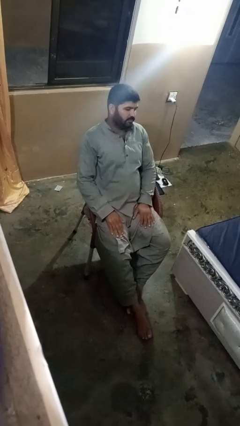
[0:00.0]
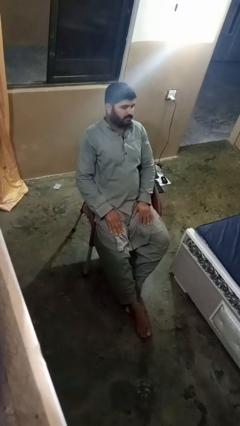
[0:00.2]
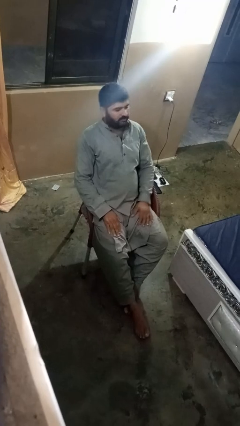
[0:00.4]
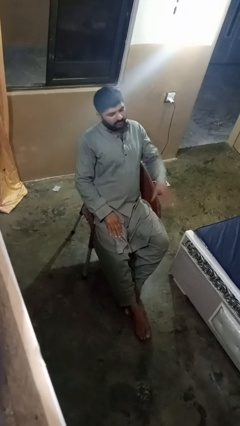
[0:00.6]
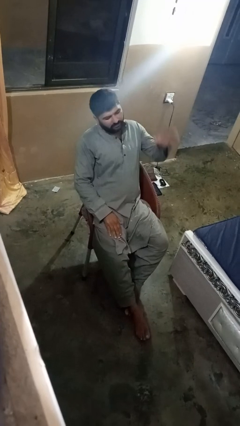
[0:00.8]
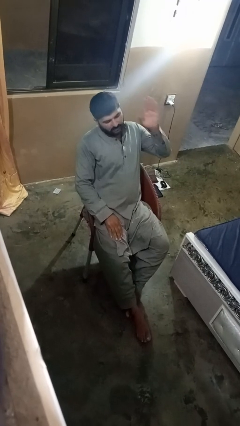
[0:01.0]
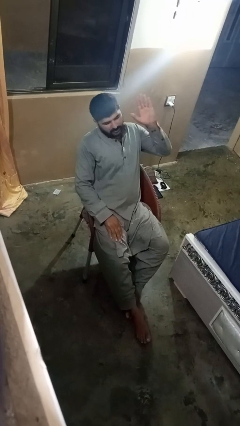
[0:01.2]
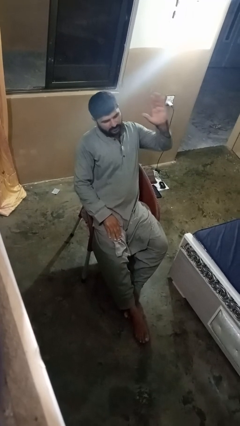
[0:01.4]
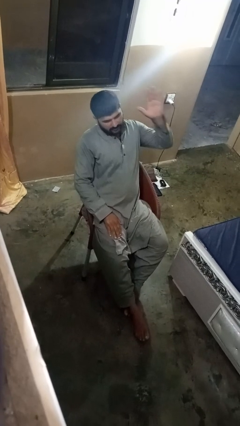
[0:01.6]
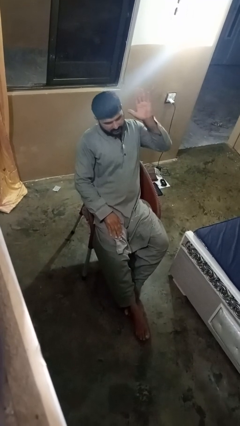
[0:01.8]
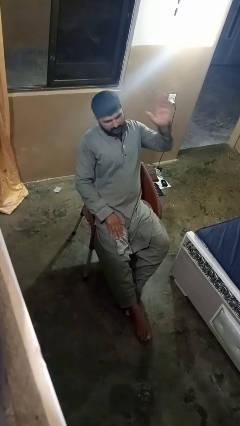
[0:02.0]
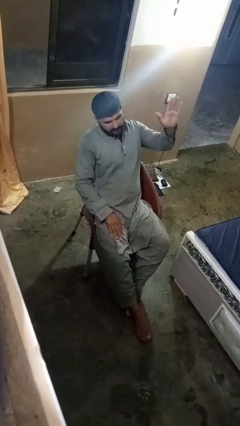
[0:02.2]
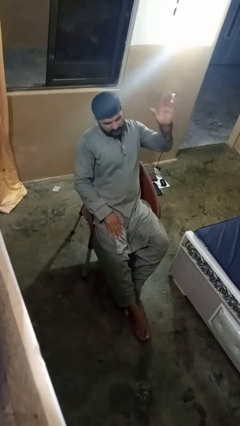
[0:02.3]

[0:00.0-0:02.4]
person gestures number five

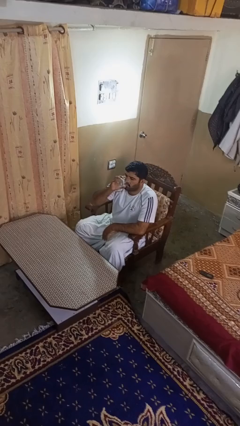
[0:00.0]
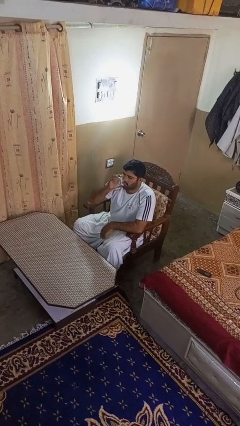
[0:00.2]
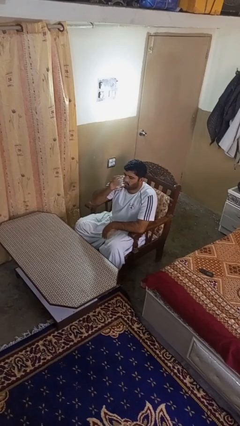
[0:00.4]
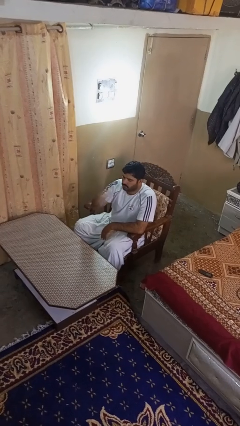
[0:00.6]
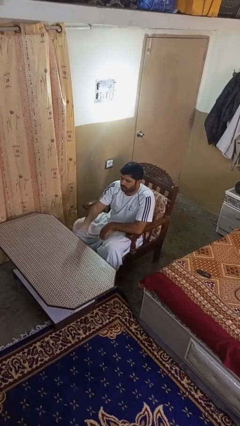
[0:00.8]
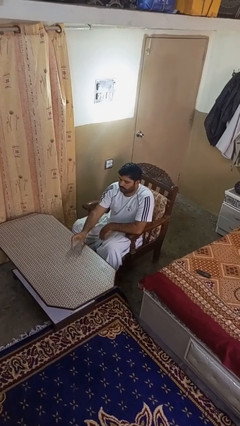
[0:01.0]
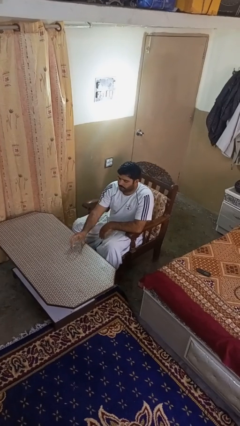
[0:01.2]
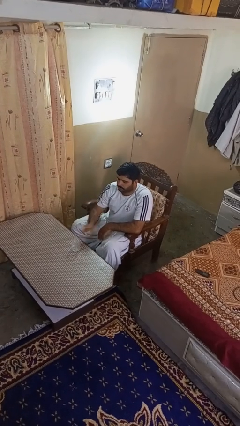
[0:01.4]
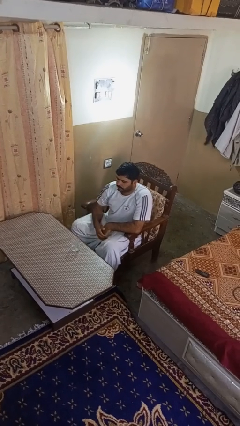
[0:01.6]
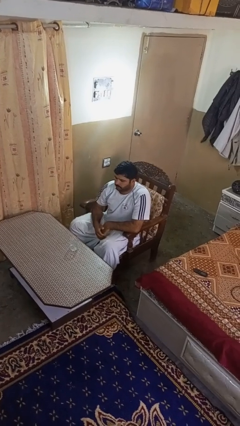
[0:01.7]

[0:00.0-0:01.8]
person puts down object on table

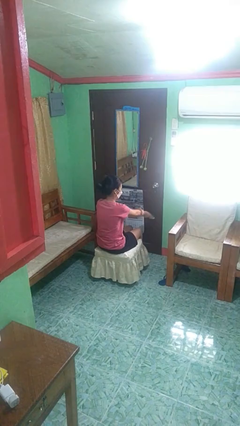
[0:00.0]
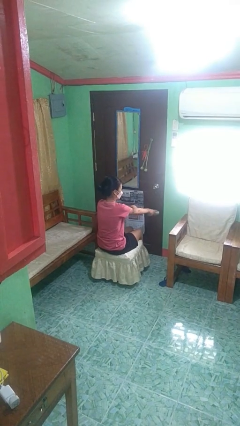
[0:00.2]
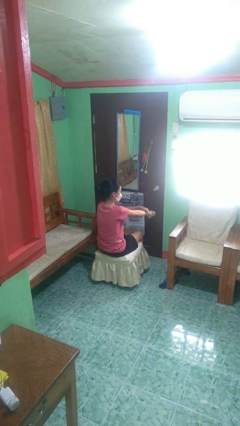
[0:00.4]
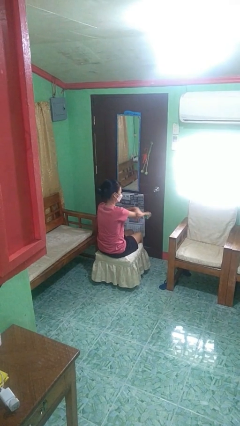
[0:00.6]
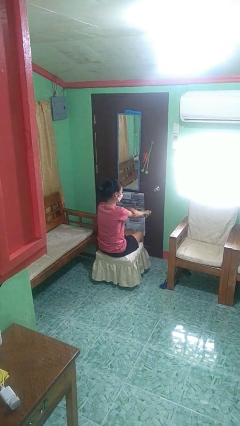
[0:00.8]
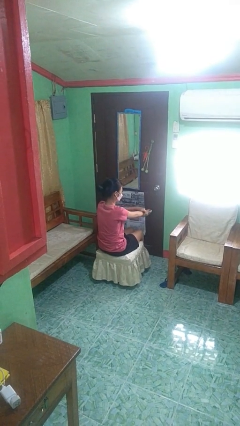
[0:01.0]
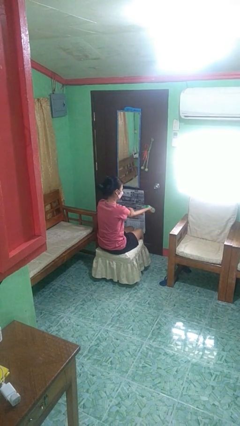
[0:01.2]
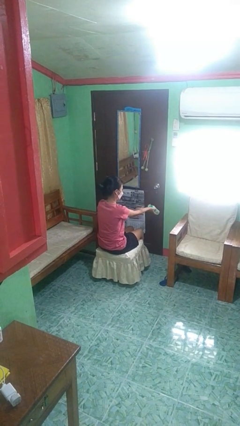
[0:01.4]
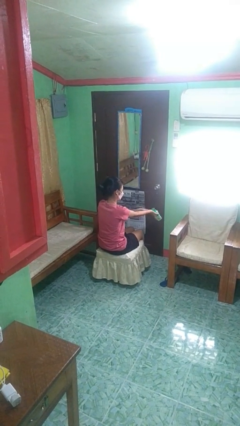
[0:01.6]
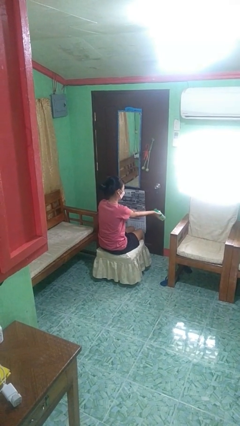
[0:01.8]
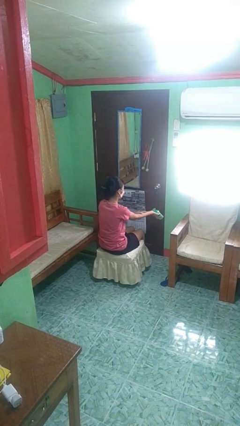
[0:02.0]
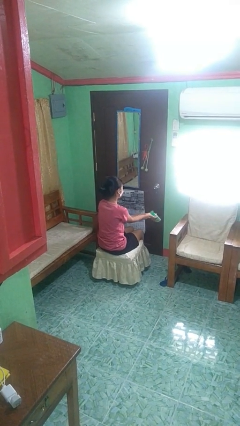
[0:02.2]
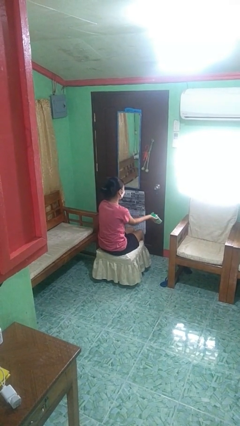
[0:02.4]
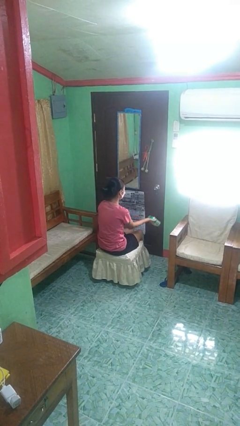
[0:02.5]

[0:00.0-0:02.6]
person applies sunscreen

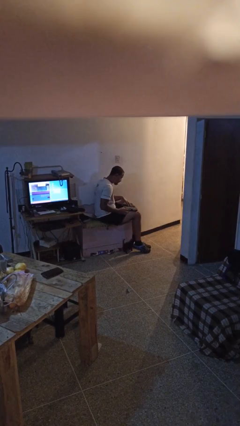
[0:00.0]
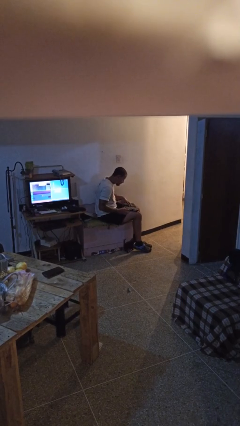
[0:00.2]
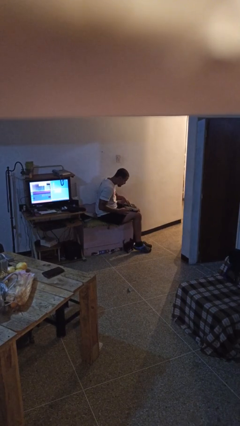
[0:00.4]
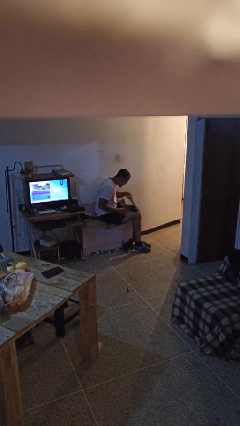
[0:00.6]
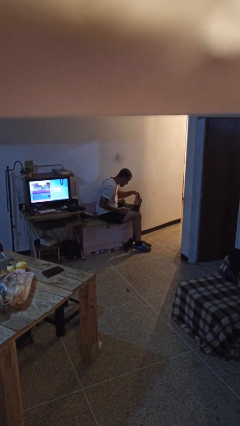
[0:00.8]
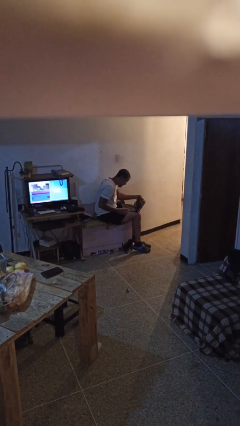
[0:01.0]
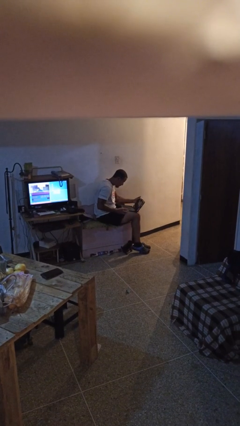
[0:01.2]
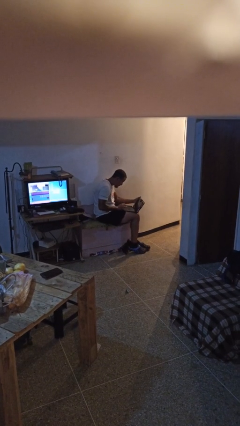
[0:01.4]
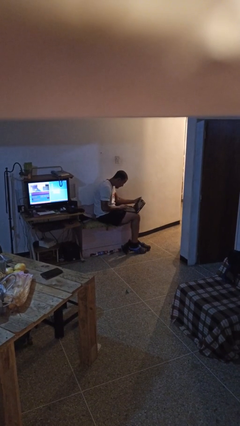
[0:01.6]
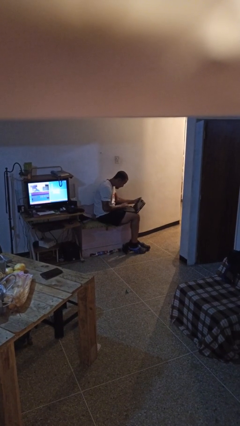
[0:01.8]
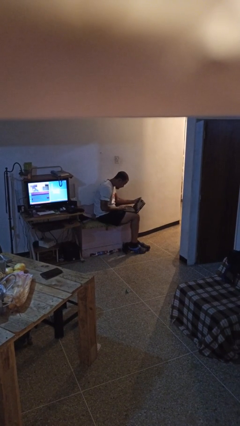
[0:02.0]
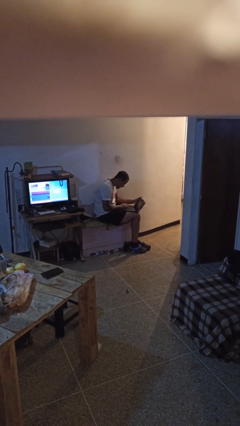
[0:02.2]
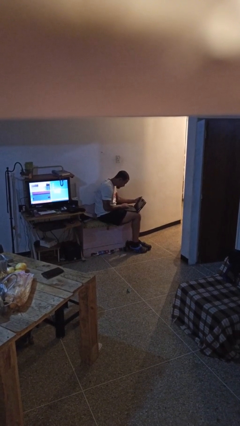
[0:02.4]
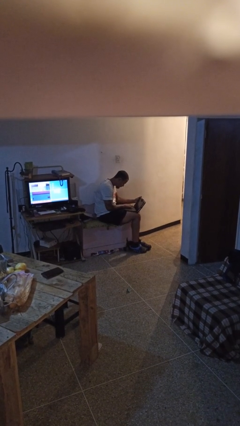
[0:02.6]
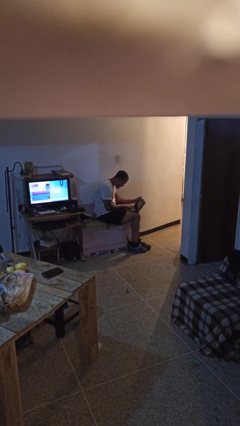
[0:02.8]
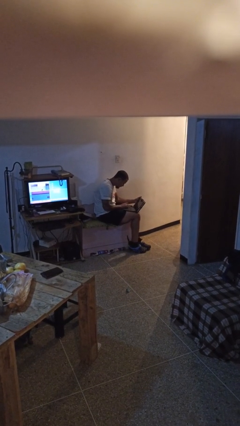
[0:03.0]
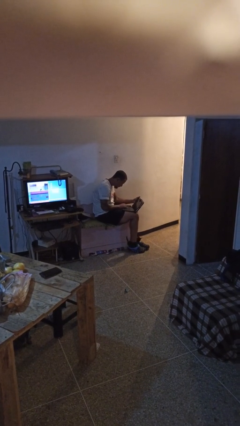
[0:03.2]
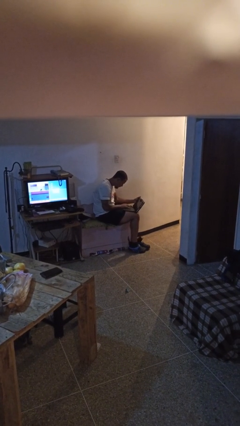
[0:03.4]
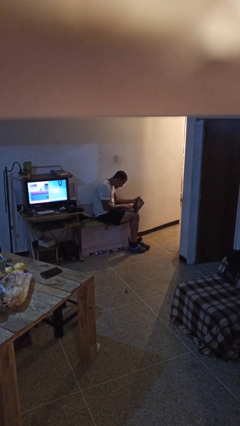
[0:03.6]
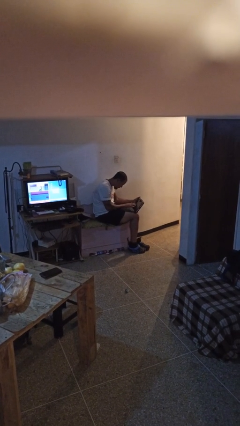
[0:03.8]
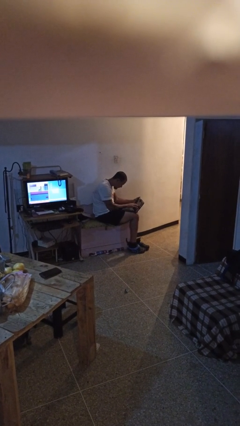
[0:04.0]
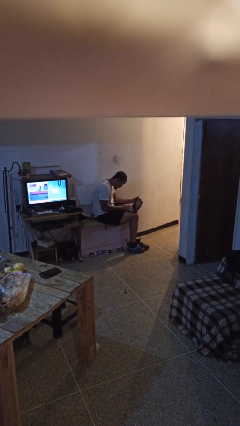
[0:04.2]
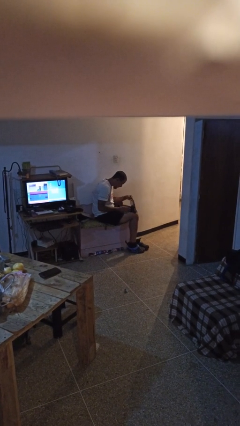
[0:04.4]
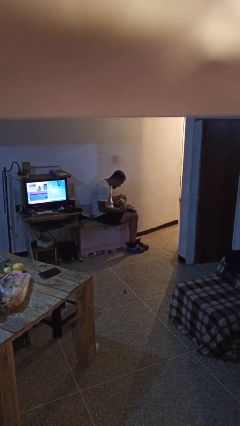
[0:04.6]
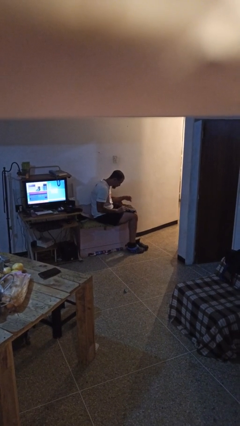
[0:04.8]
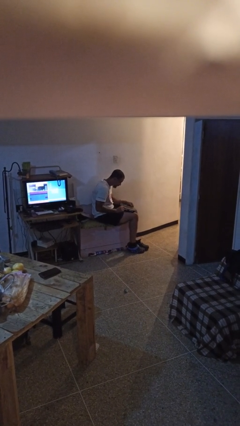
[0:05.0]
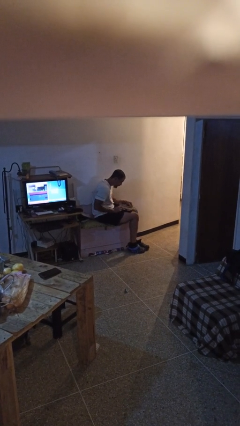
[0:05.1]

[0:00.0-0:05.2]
person interacts with laptop

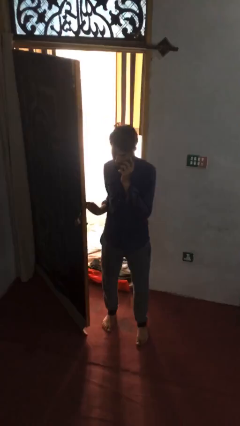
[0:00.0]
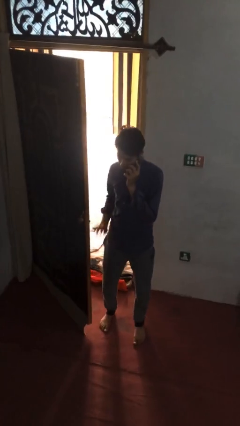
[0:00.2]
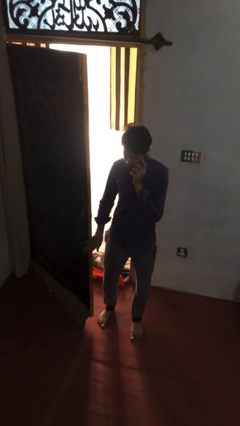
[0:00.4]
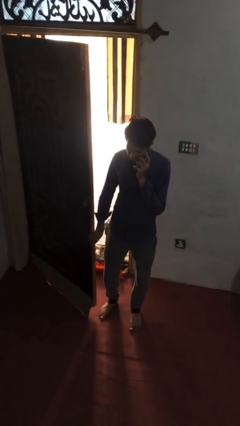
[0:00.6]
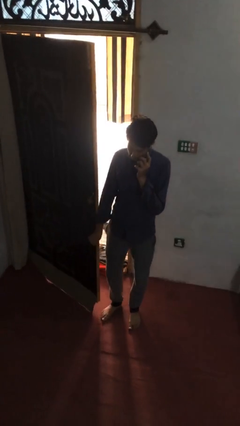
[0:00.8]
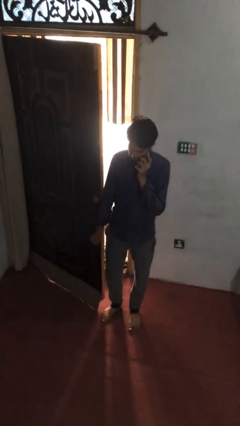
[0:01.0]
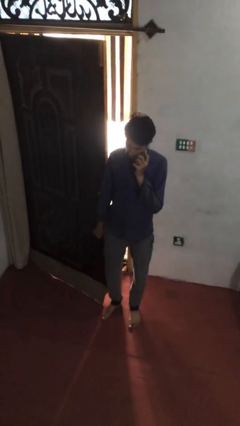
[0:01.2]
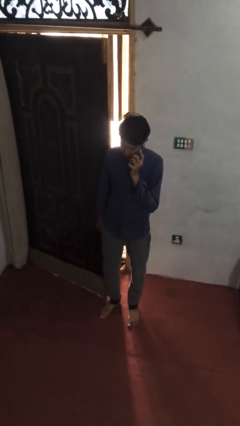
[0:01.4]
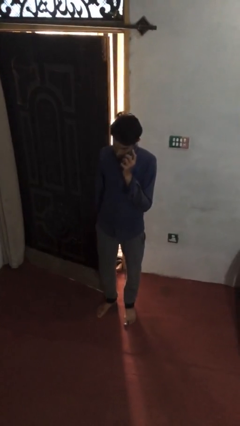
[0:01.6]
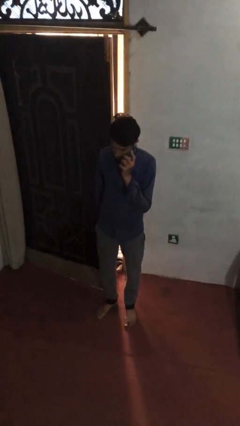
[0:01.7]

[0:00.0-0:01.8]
person closes facility door

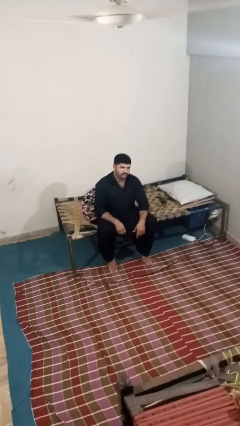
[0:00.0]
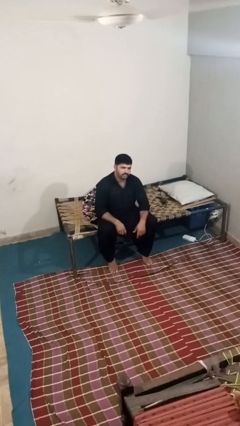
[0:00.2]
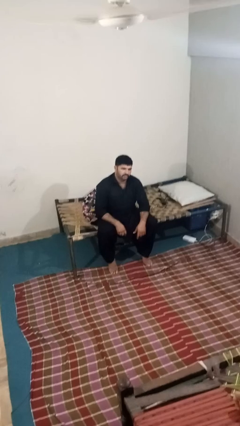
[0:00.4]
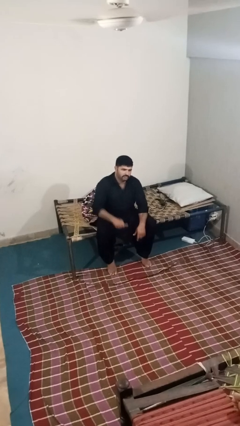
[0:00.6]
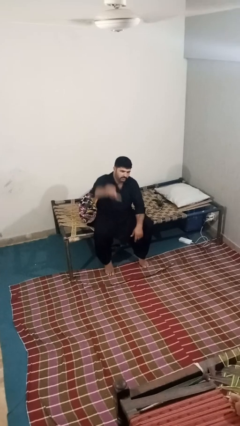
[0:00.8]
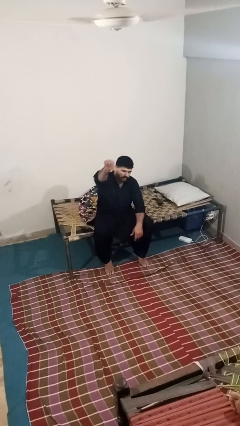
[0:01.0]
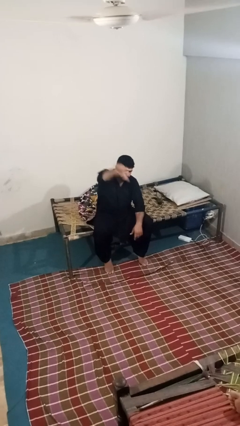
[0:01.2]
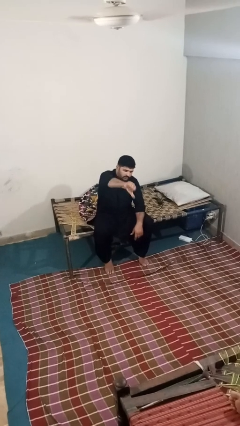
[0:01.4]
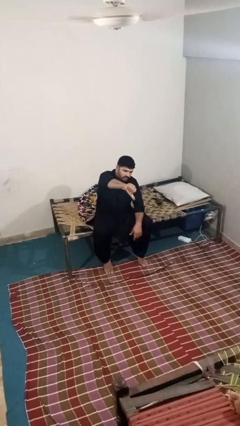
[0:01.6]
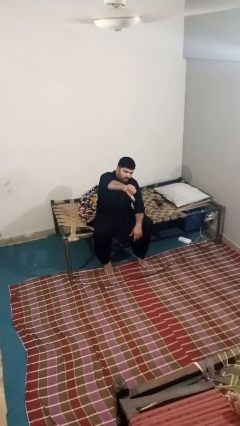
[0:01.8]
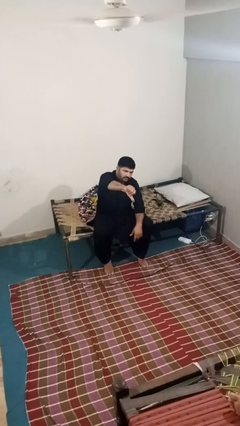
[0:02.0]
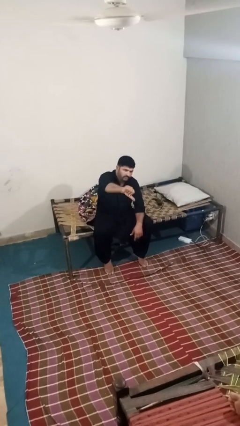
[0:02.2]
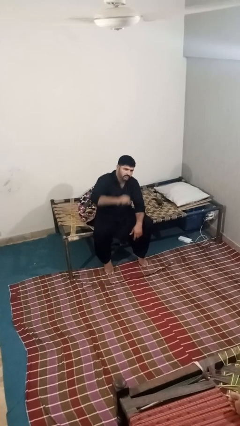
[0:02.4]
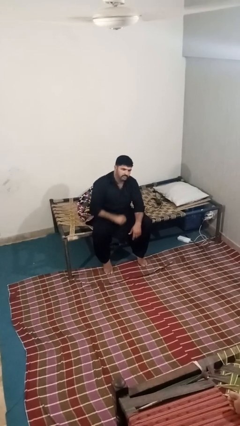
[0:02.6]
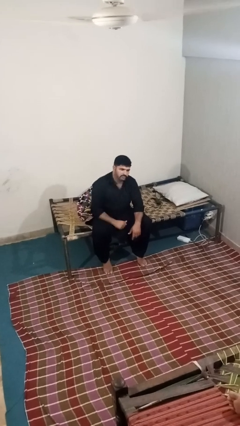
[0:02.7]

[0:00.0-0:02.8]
person gestures thumbs down

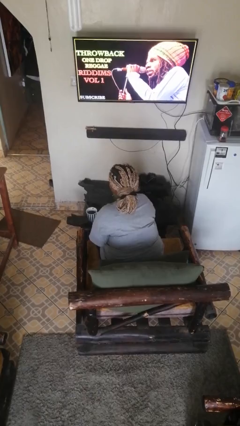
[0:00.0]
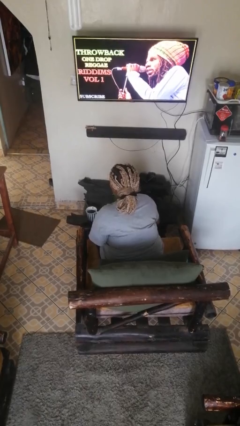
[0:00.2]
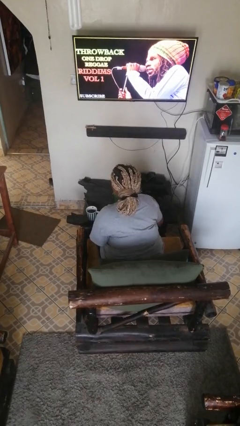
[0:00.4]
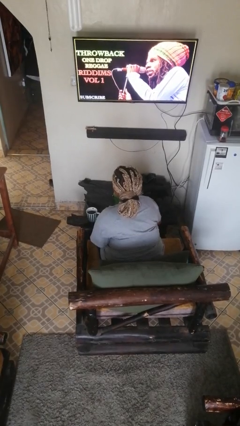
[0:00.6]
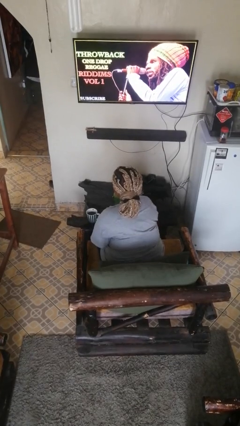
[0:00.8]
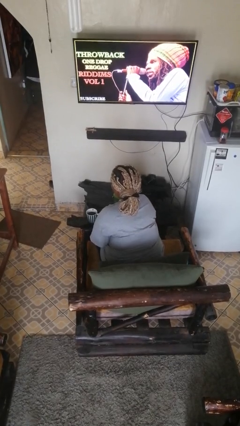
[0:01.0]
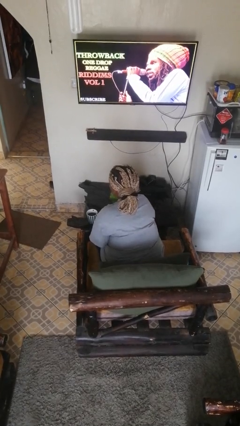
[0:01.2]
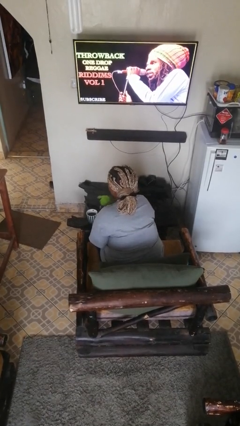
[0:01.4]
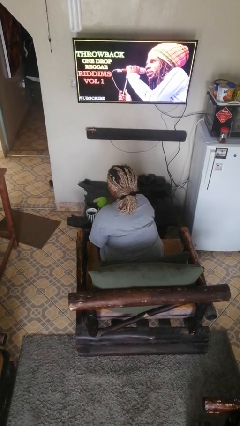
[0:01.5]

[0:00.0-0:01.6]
person pours coffee into mug
